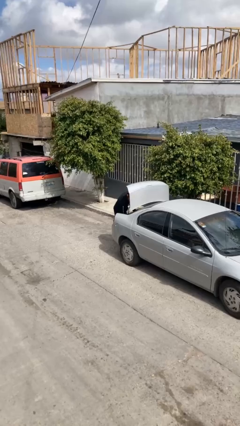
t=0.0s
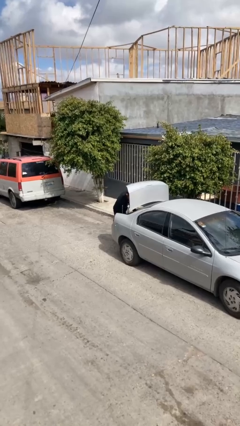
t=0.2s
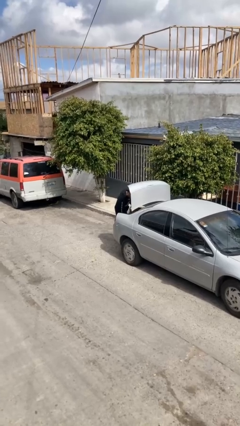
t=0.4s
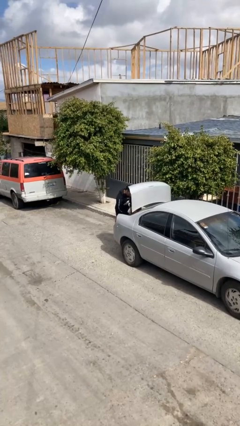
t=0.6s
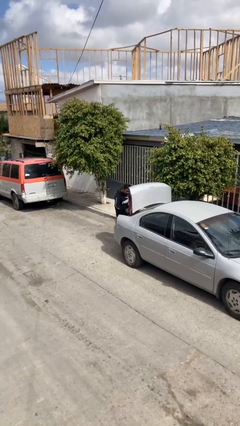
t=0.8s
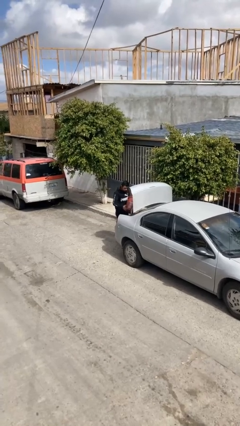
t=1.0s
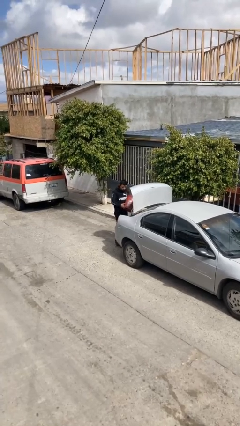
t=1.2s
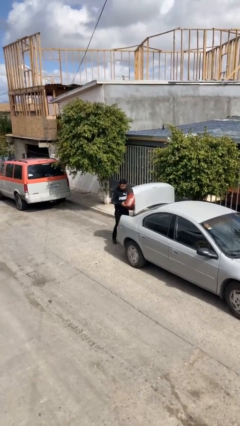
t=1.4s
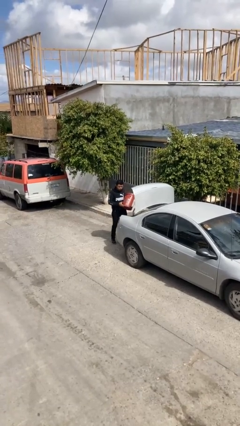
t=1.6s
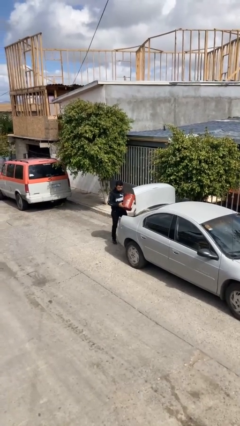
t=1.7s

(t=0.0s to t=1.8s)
person unloads car

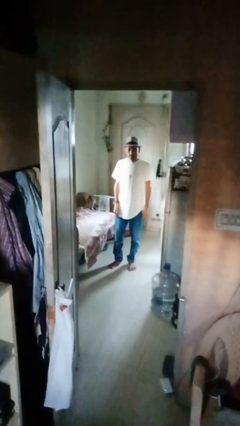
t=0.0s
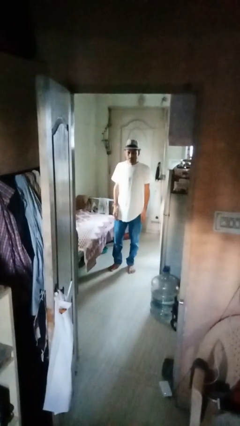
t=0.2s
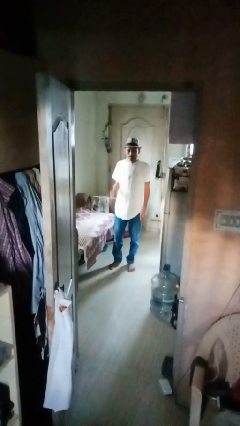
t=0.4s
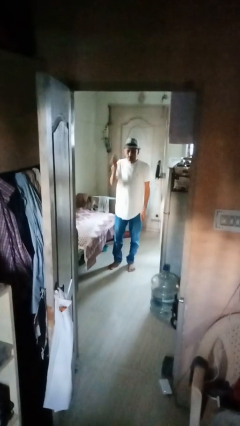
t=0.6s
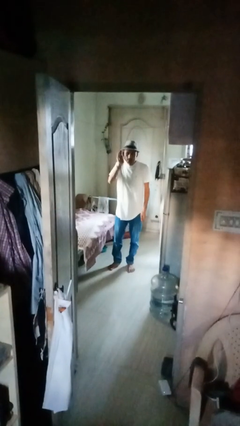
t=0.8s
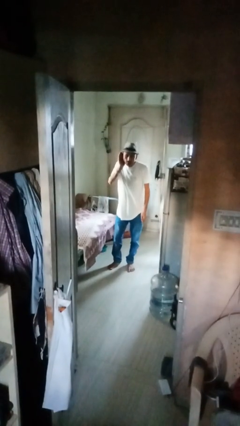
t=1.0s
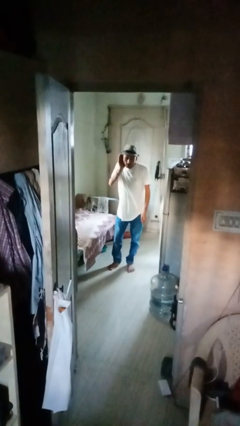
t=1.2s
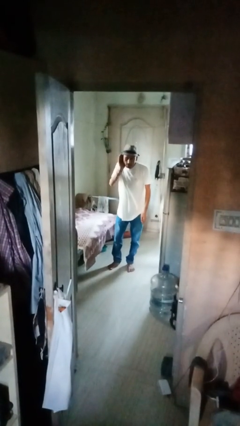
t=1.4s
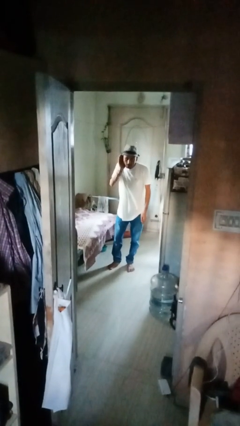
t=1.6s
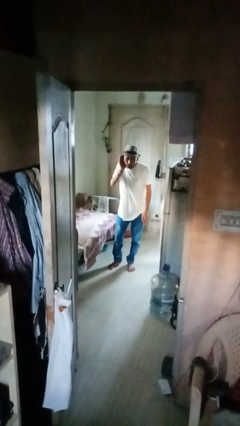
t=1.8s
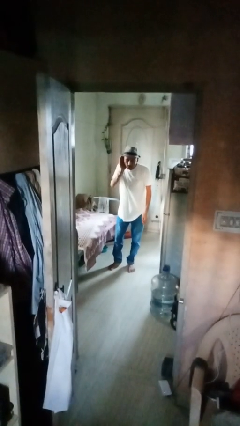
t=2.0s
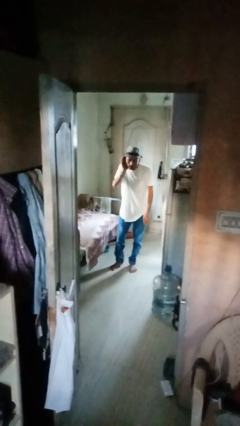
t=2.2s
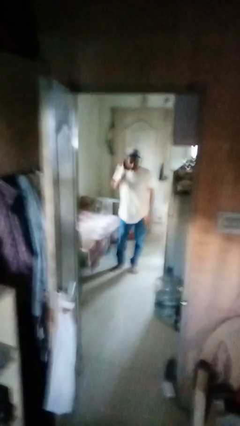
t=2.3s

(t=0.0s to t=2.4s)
person gestures listen closely

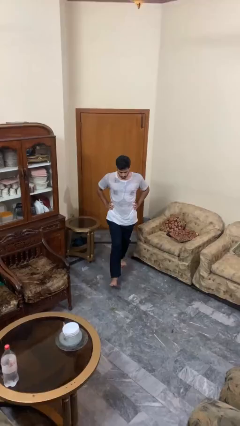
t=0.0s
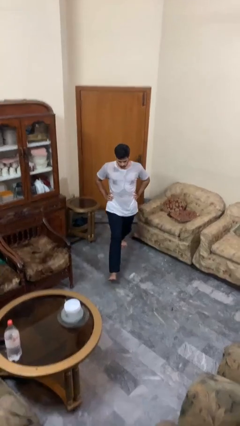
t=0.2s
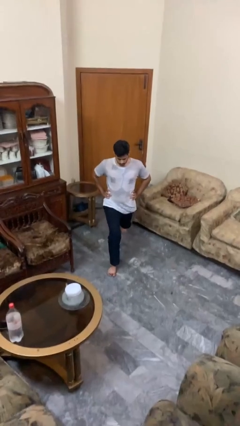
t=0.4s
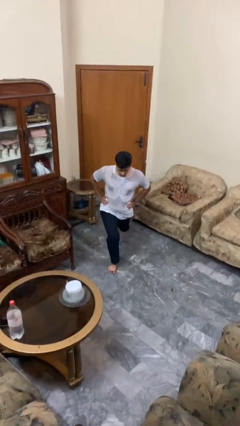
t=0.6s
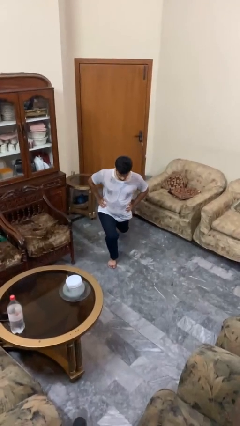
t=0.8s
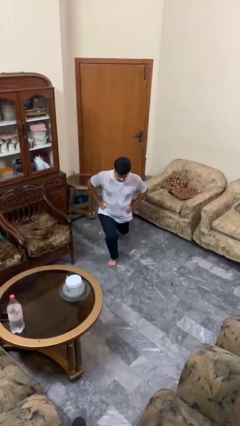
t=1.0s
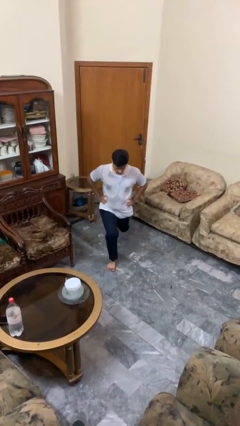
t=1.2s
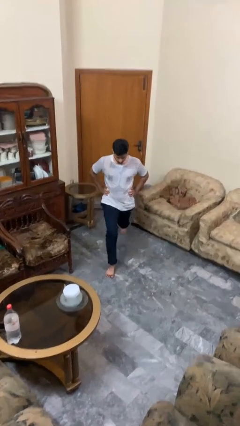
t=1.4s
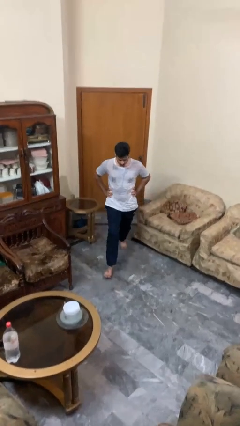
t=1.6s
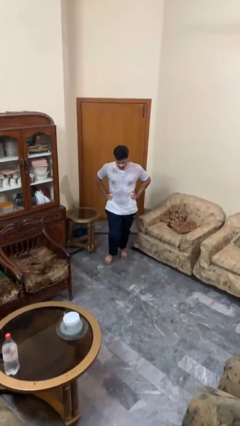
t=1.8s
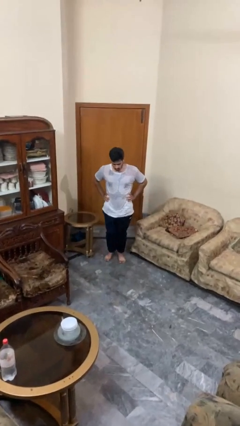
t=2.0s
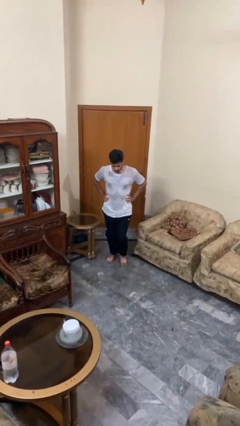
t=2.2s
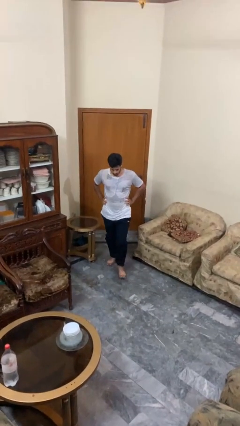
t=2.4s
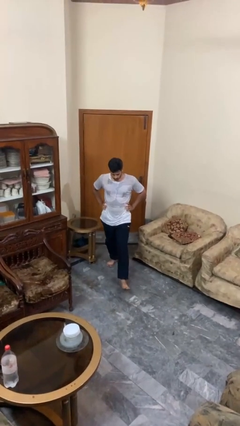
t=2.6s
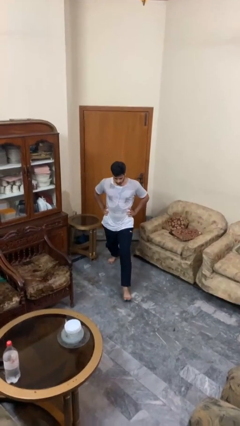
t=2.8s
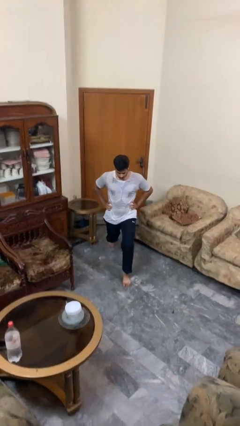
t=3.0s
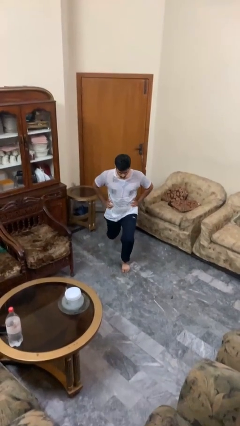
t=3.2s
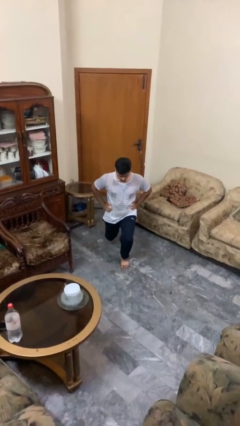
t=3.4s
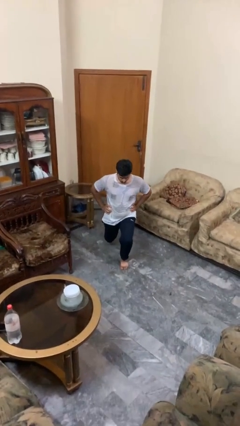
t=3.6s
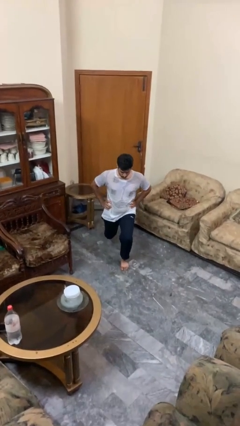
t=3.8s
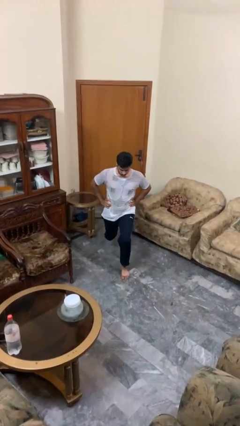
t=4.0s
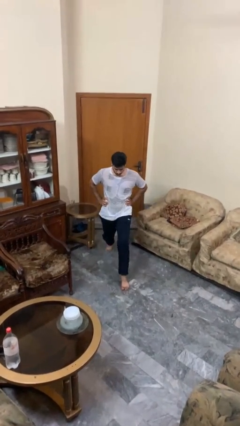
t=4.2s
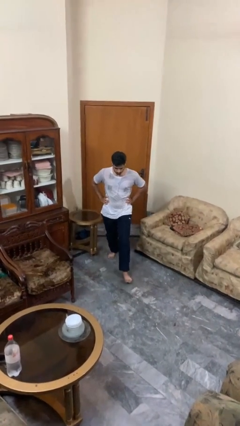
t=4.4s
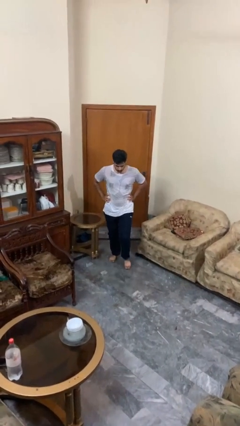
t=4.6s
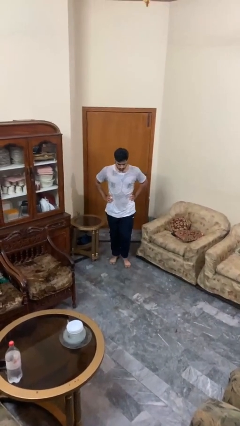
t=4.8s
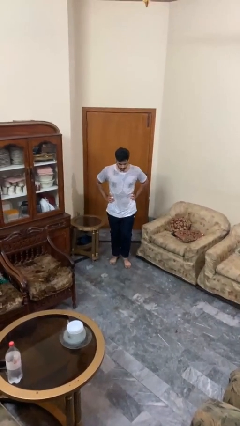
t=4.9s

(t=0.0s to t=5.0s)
person exercises with lunges

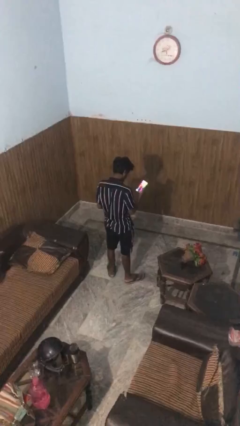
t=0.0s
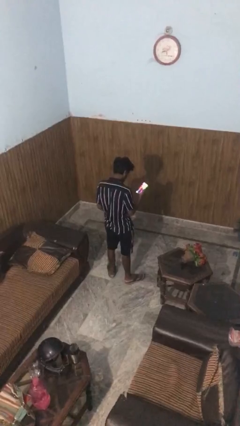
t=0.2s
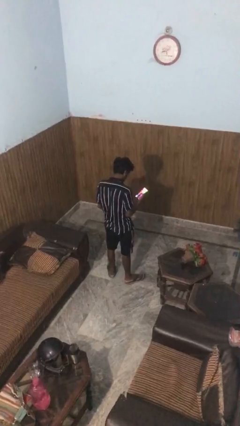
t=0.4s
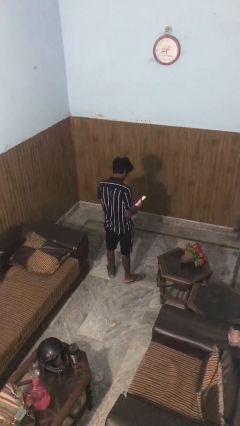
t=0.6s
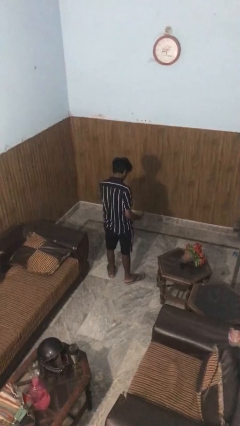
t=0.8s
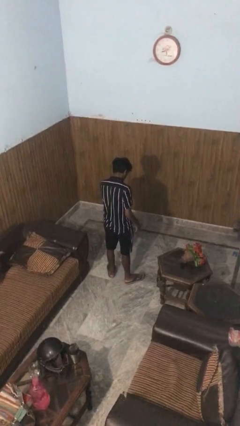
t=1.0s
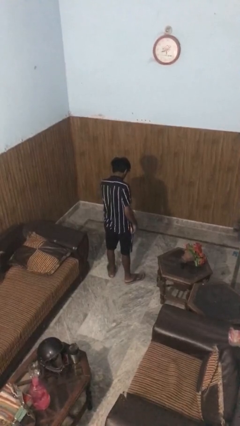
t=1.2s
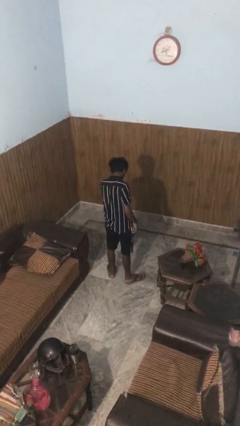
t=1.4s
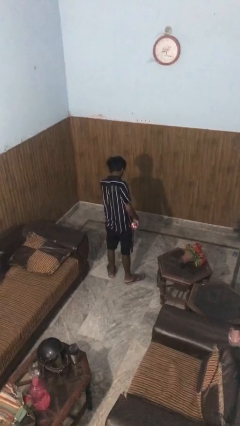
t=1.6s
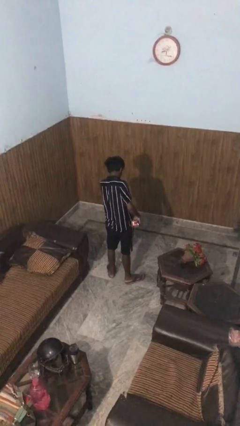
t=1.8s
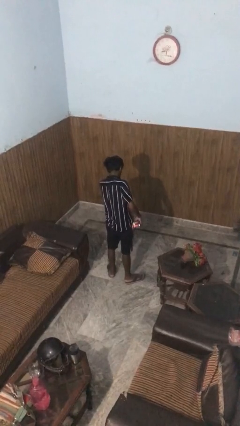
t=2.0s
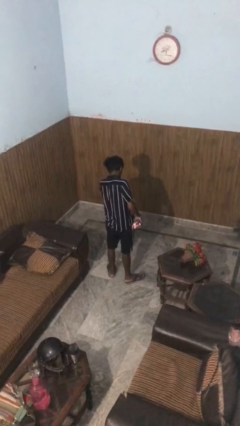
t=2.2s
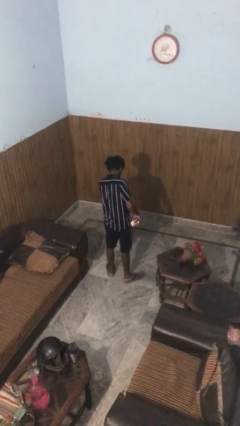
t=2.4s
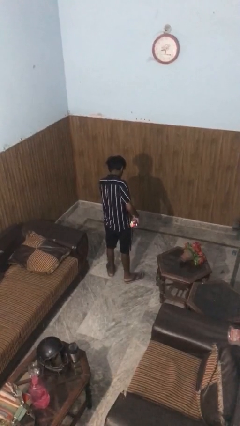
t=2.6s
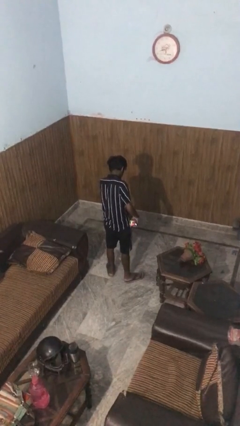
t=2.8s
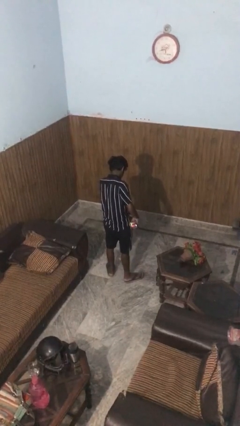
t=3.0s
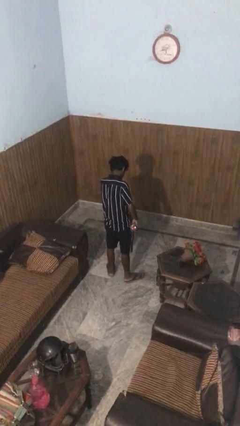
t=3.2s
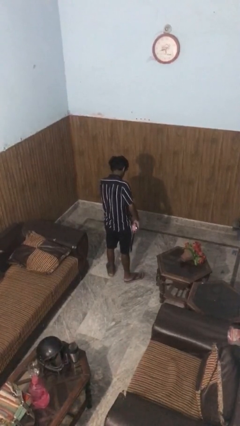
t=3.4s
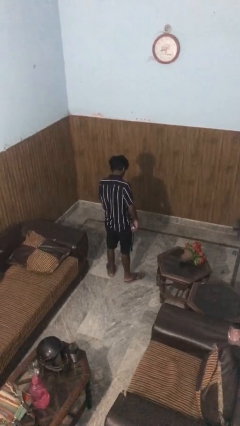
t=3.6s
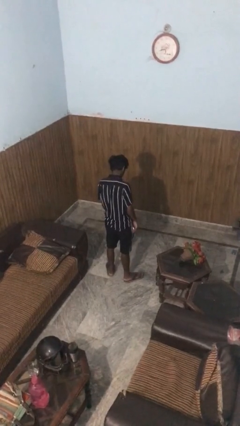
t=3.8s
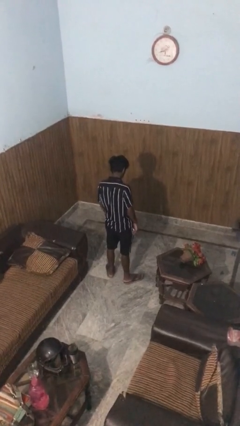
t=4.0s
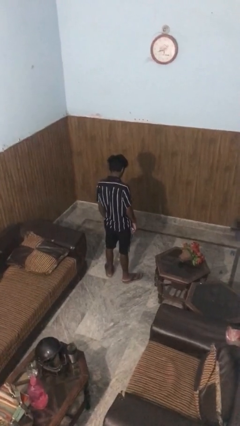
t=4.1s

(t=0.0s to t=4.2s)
person puts phone into pocket

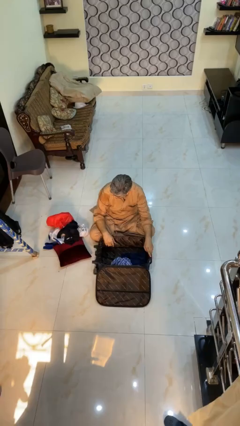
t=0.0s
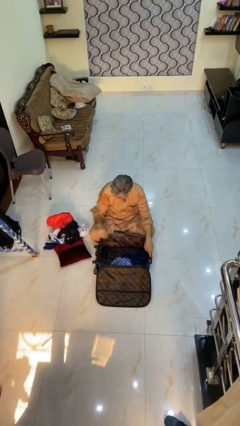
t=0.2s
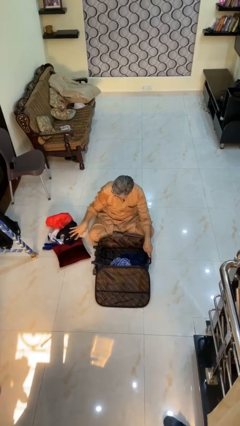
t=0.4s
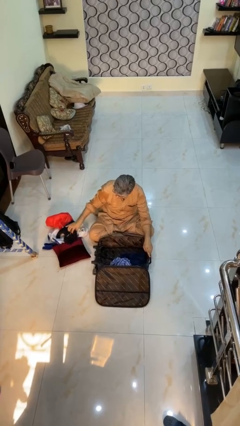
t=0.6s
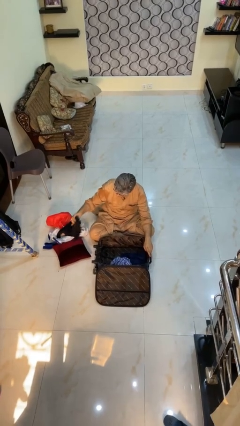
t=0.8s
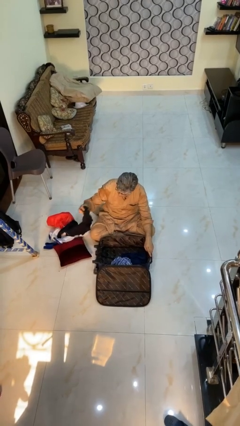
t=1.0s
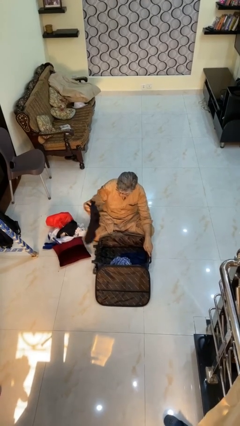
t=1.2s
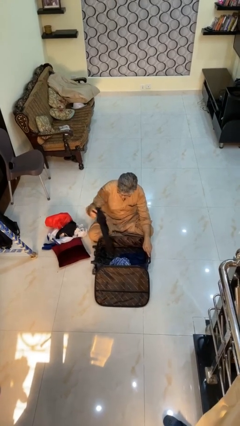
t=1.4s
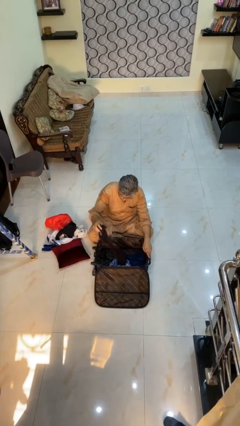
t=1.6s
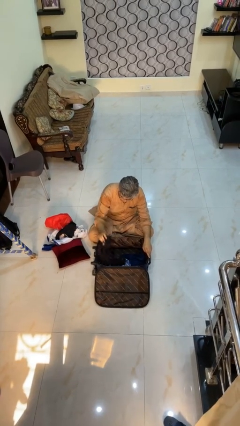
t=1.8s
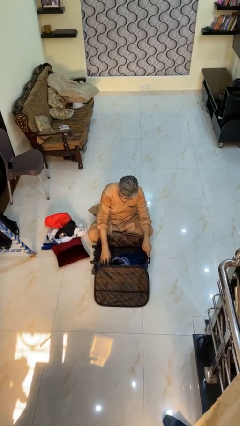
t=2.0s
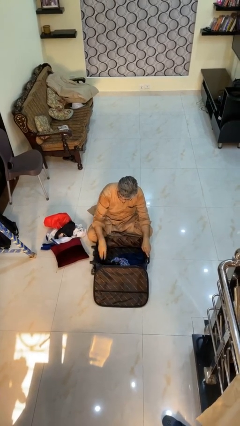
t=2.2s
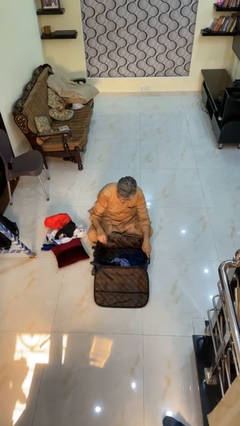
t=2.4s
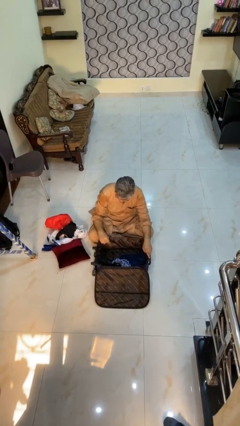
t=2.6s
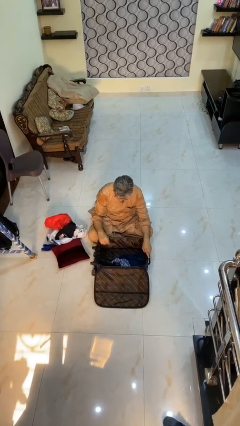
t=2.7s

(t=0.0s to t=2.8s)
person loads clothes into suitcase

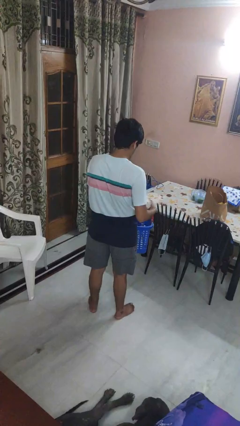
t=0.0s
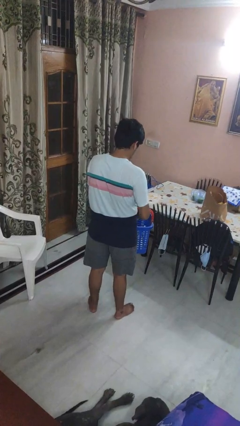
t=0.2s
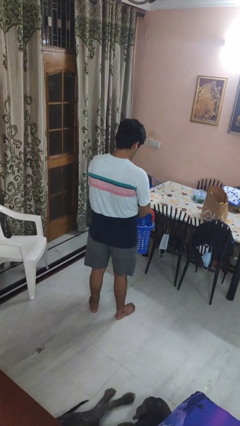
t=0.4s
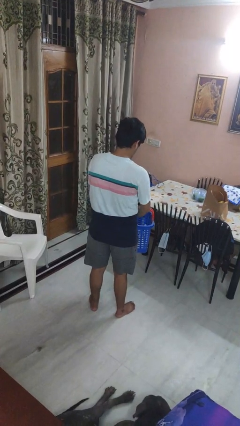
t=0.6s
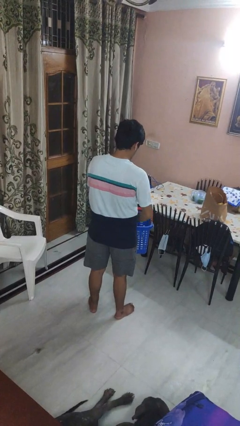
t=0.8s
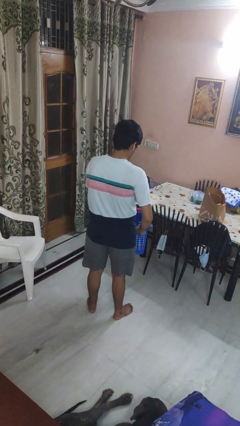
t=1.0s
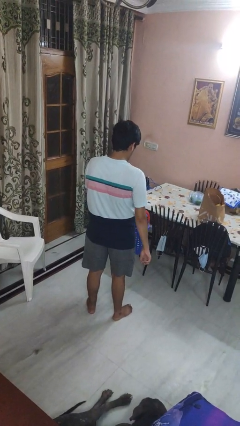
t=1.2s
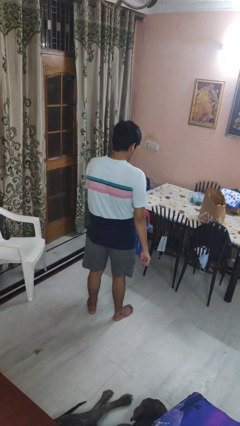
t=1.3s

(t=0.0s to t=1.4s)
person puts object into basket
